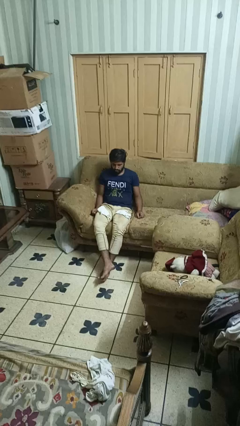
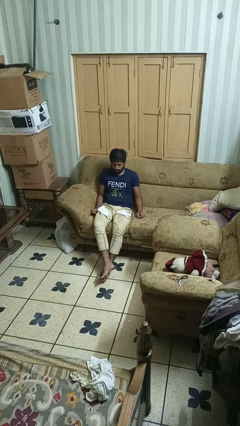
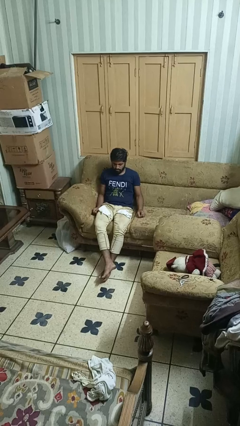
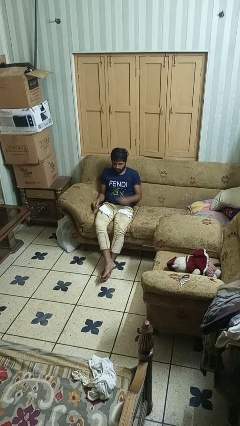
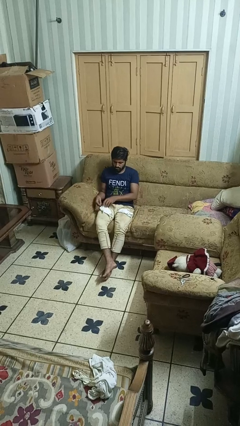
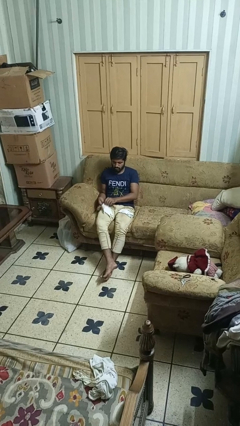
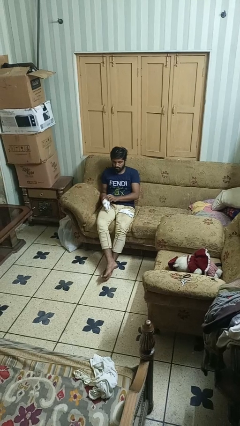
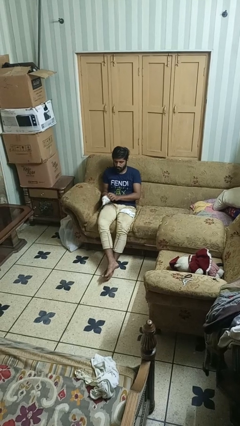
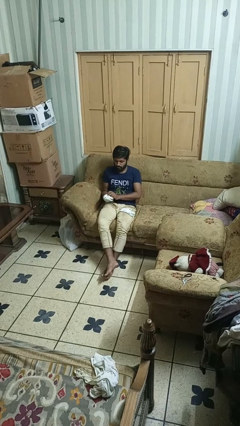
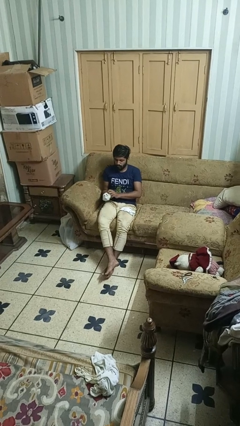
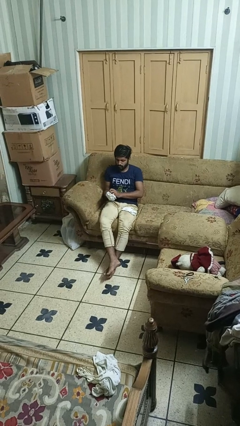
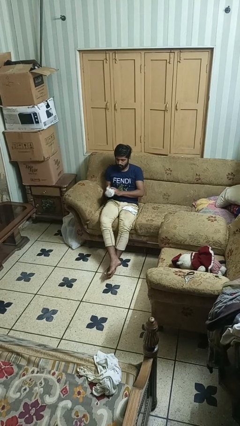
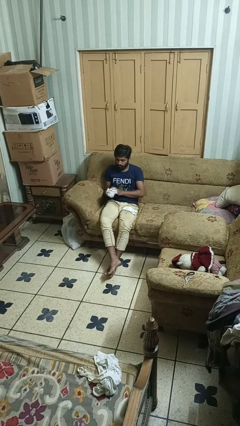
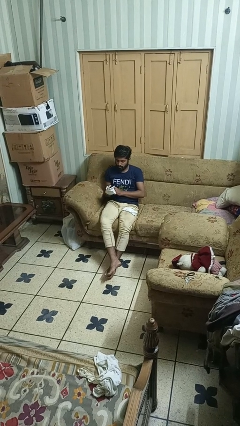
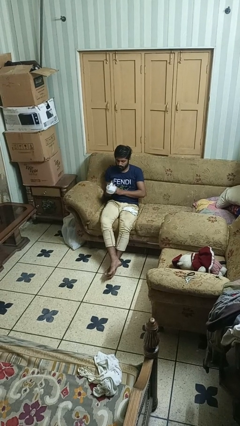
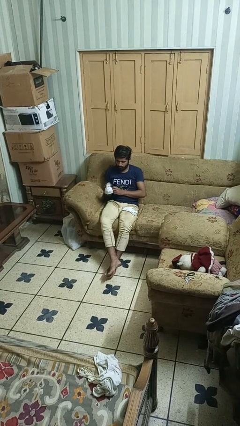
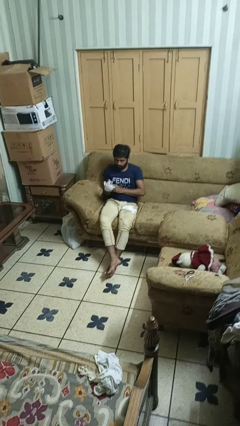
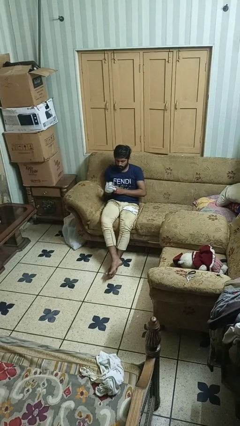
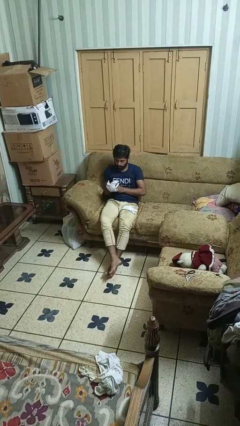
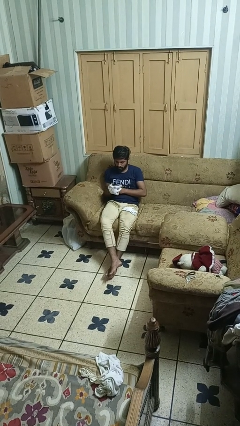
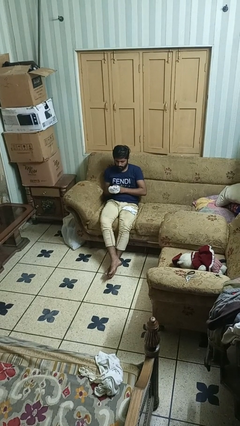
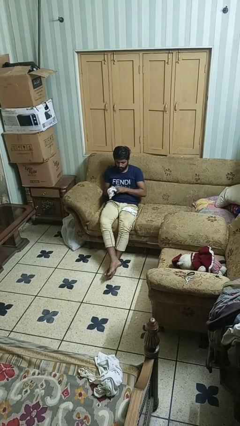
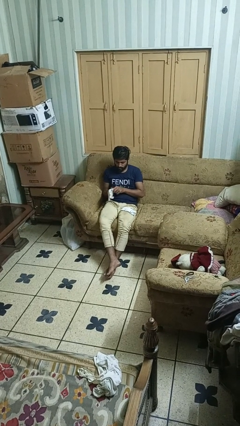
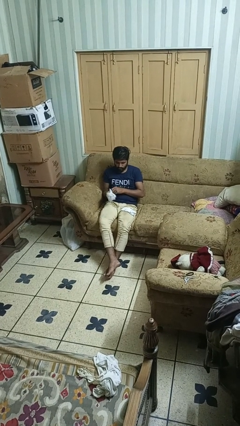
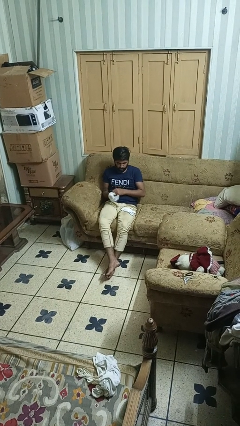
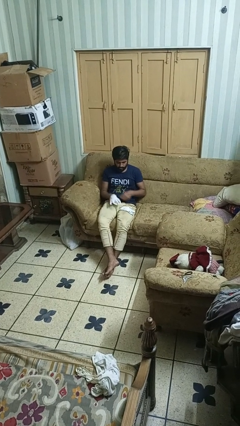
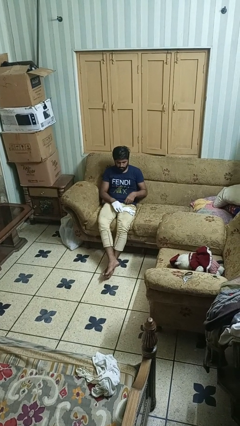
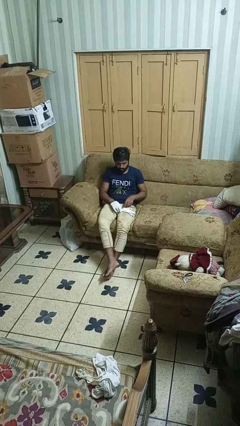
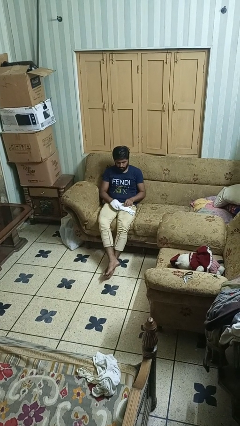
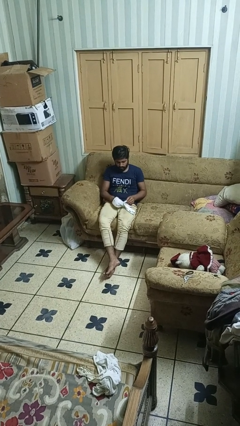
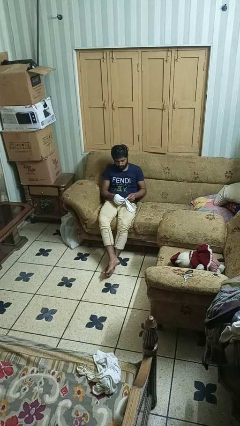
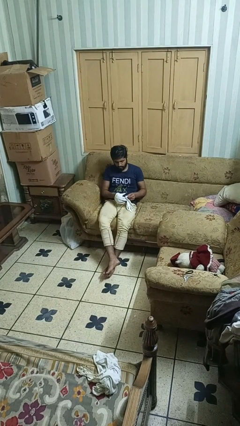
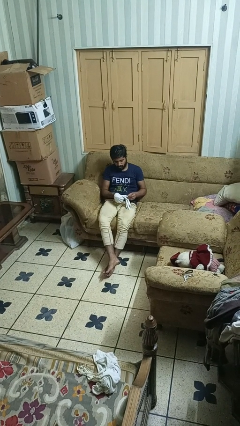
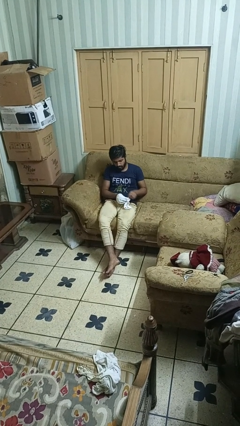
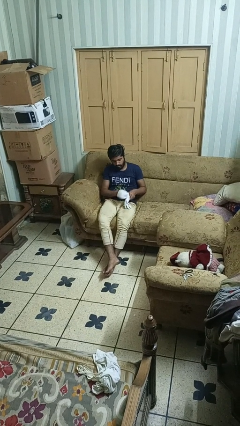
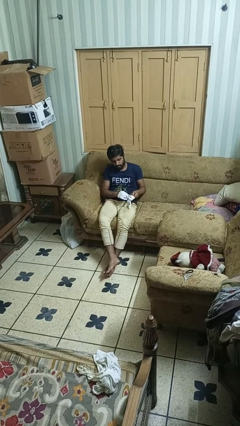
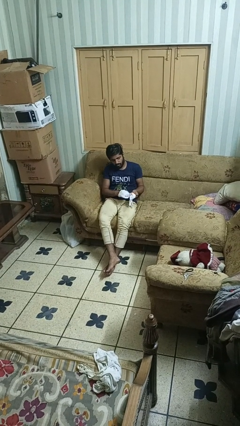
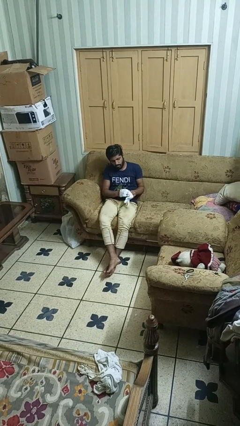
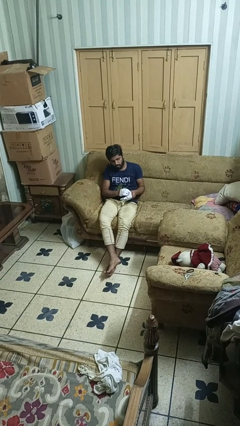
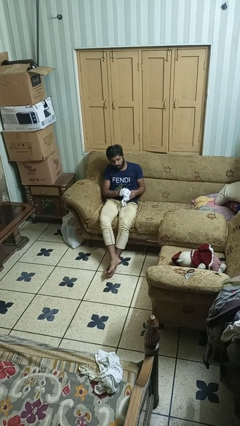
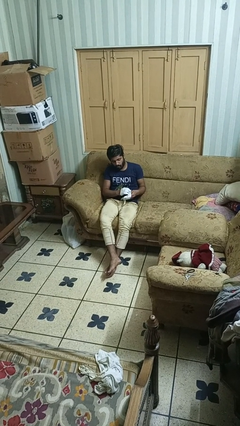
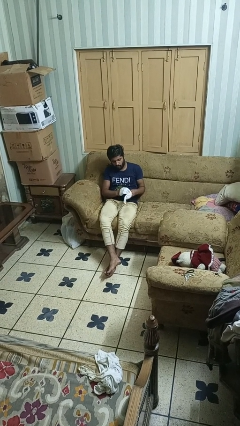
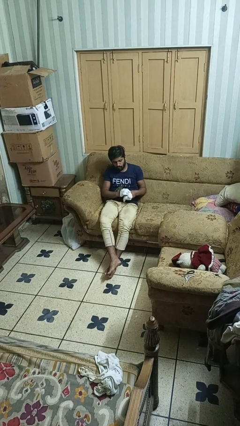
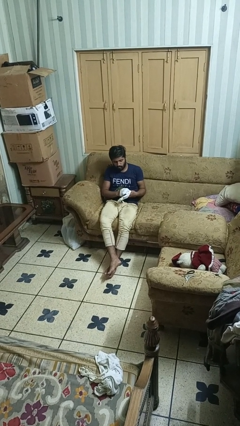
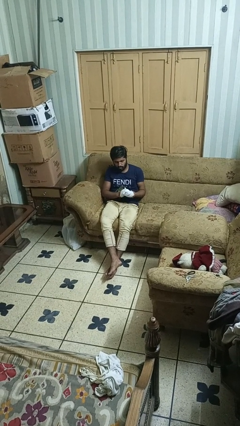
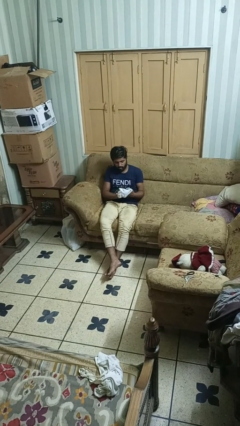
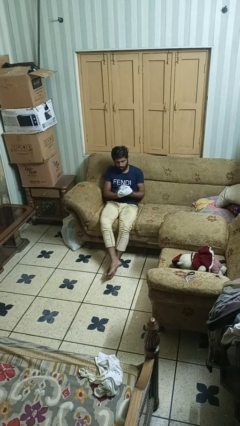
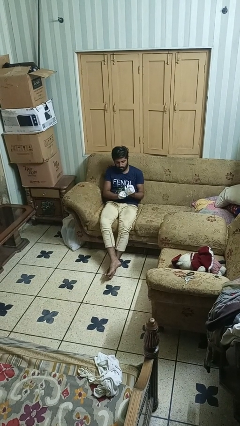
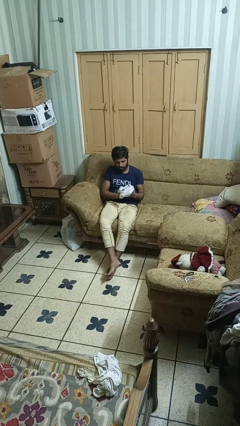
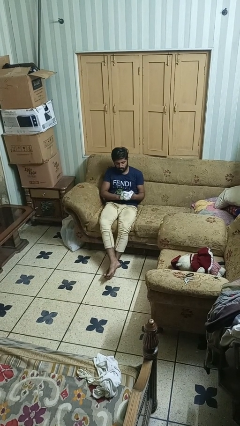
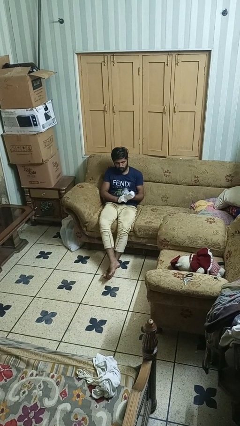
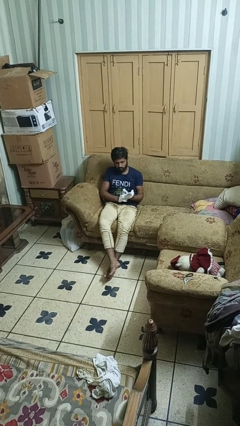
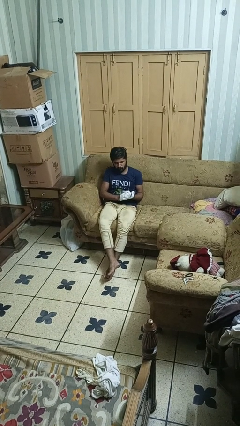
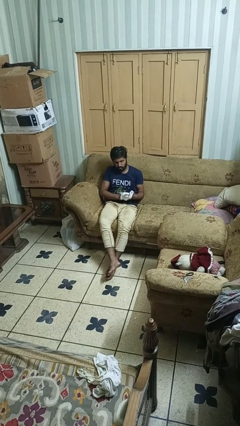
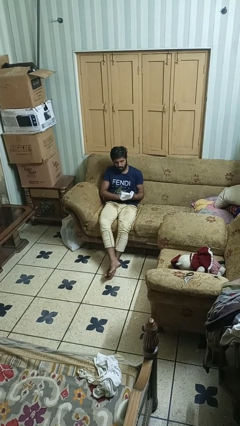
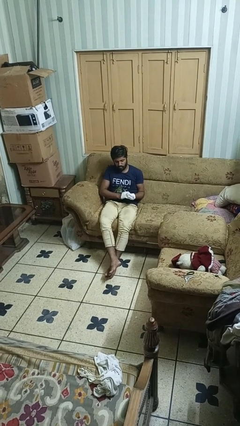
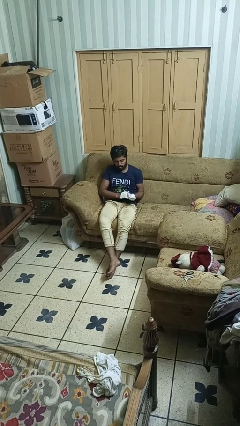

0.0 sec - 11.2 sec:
person puts on gloves

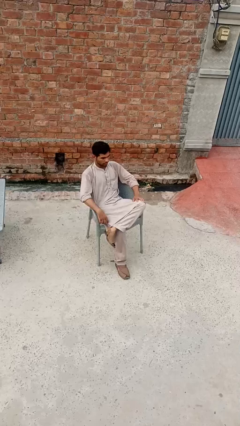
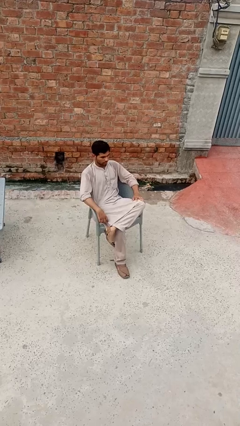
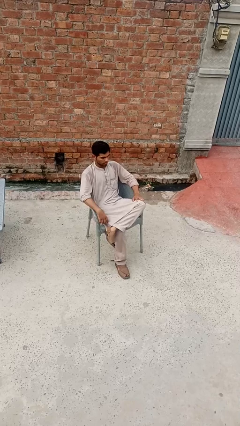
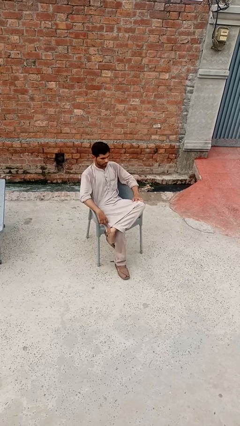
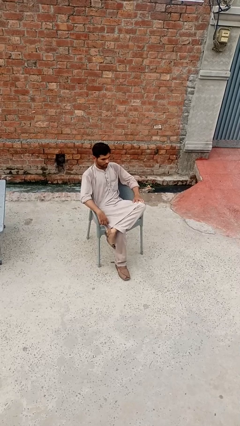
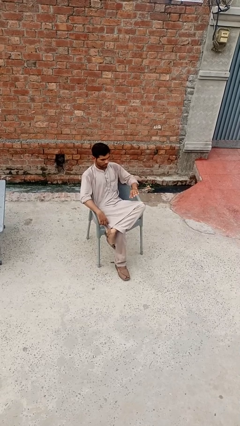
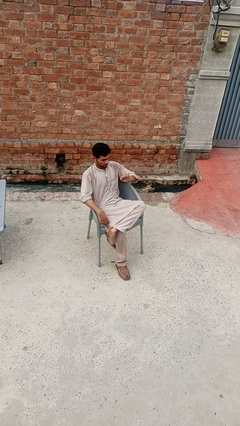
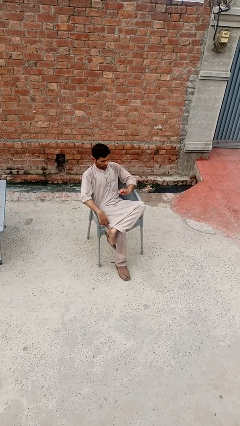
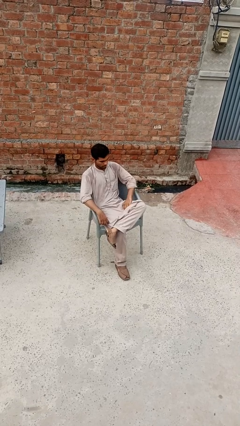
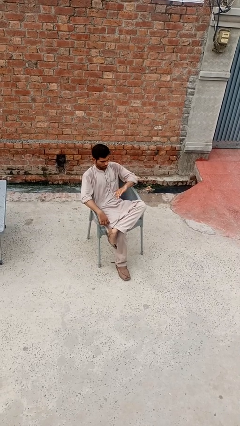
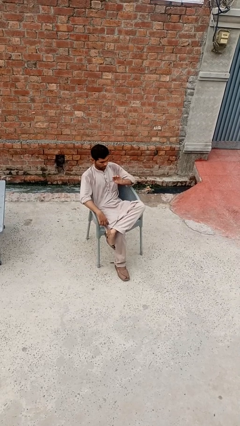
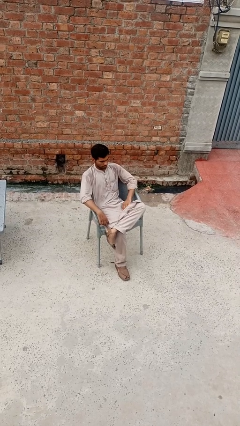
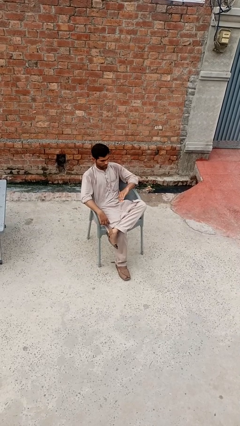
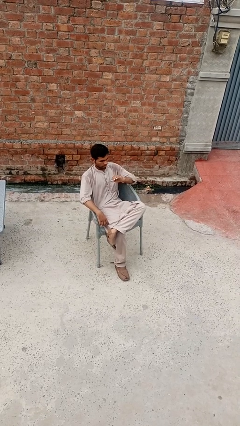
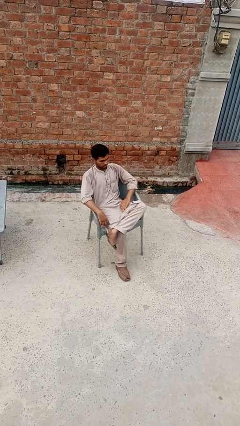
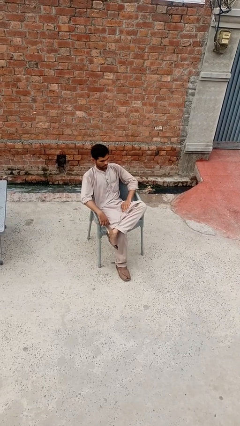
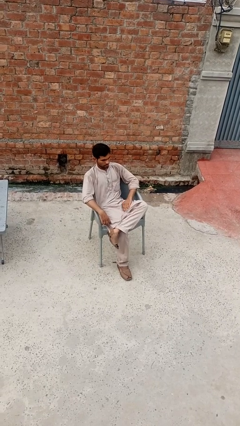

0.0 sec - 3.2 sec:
person slaps hands on thighs

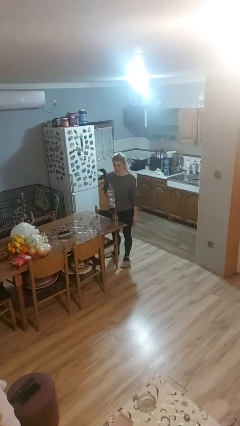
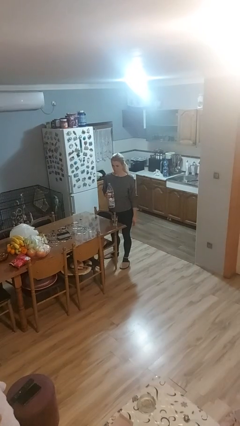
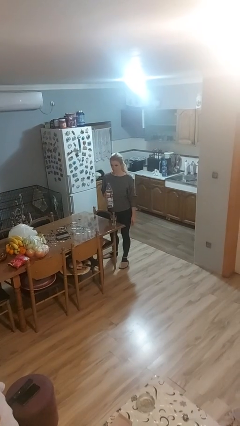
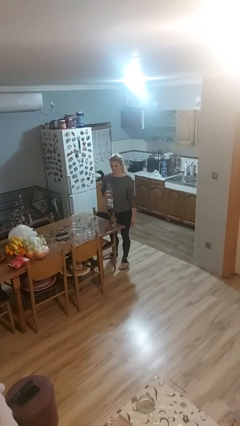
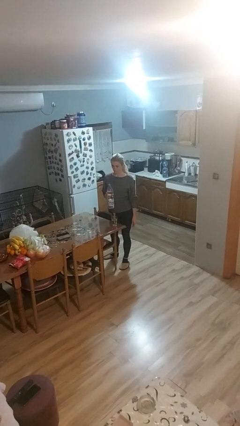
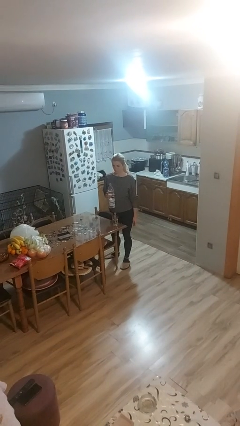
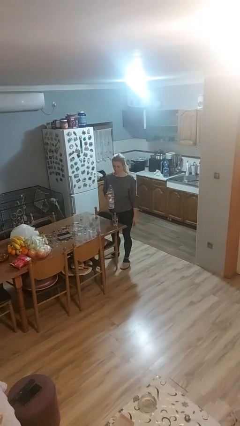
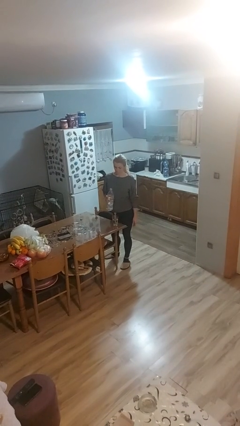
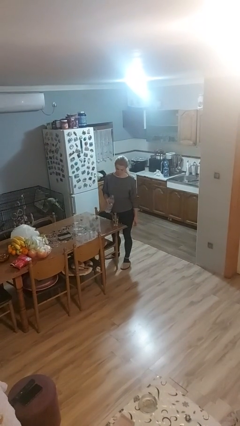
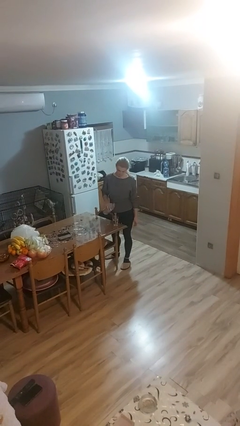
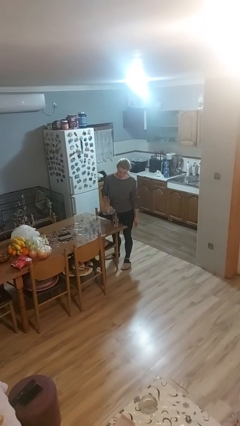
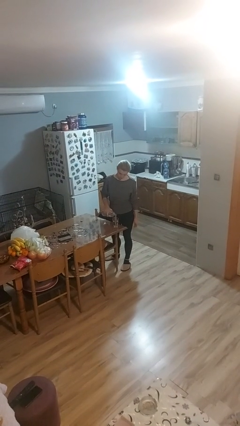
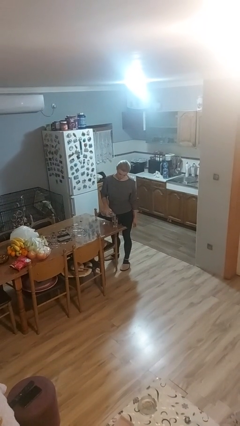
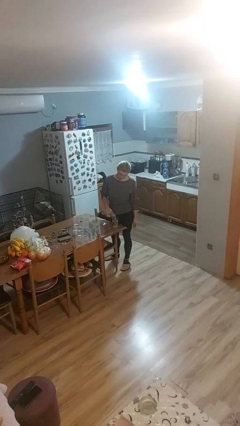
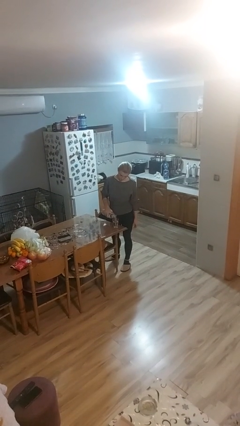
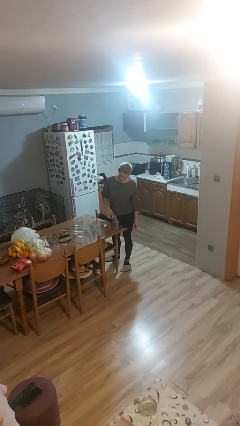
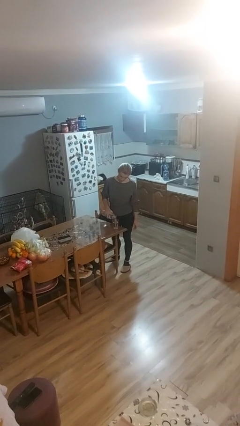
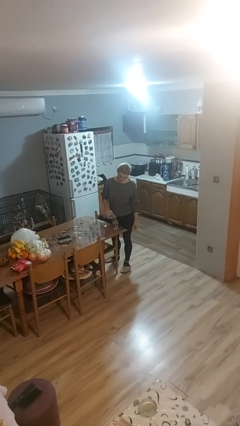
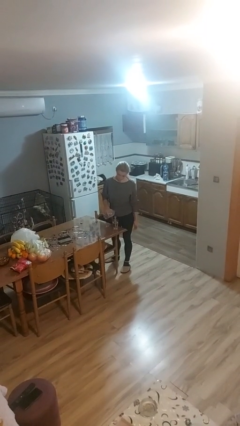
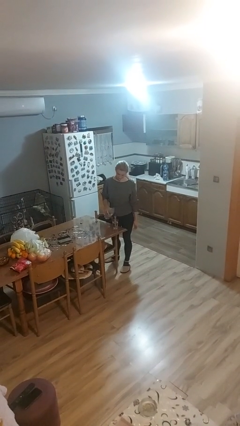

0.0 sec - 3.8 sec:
person pours liquid into cup
